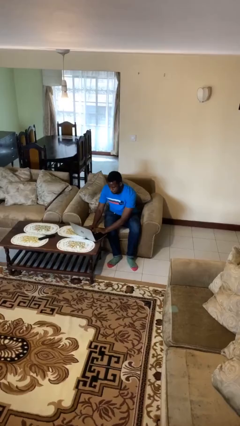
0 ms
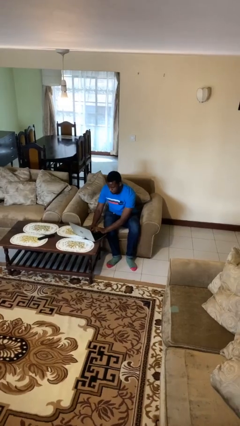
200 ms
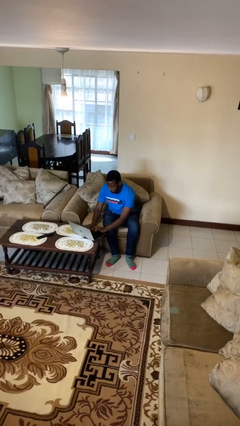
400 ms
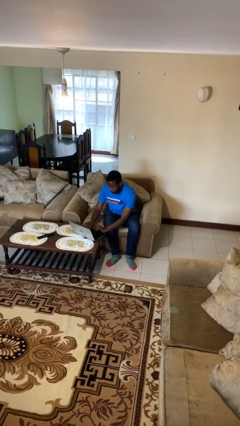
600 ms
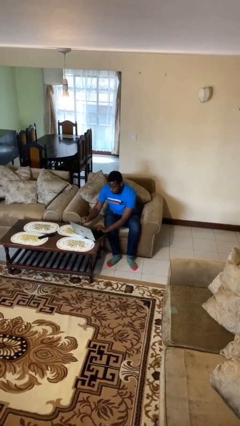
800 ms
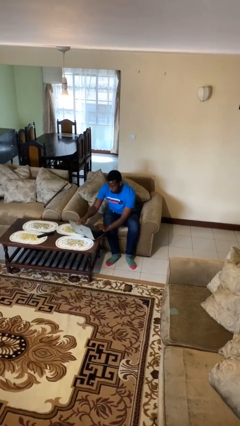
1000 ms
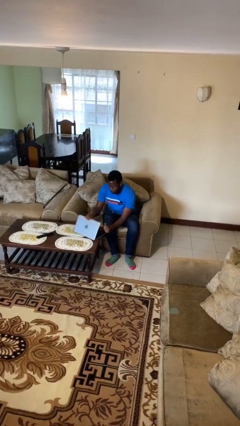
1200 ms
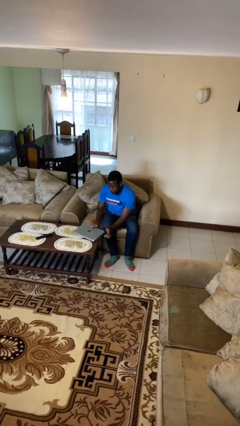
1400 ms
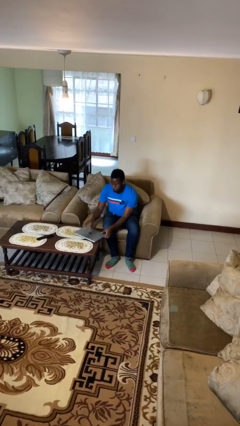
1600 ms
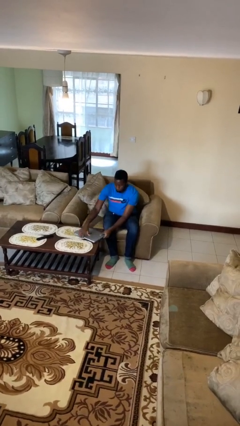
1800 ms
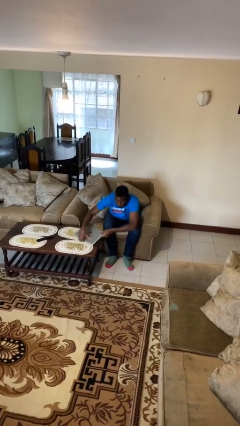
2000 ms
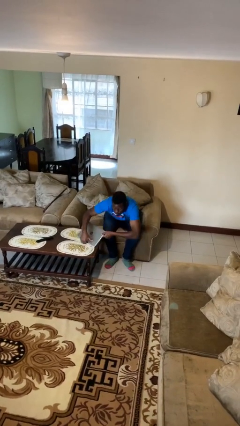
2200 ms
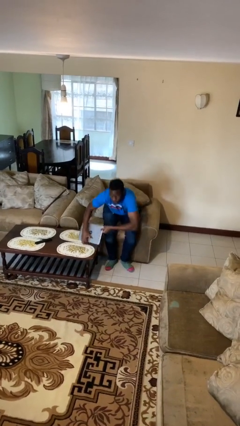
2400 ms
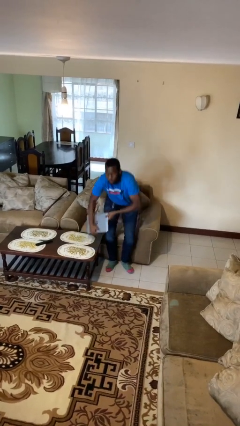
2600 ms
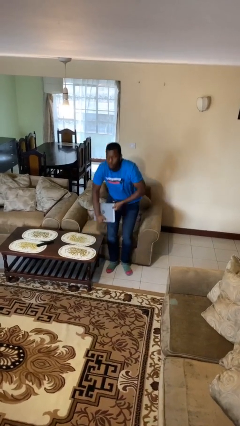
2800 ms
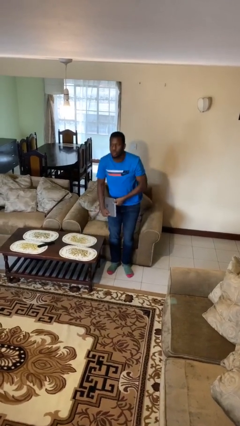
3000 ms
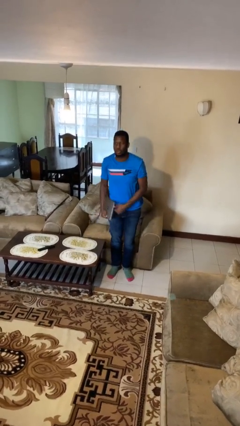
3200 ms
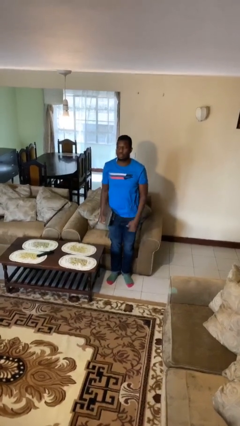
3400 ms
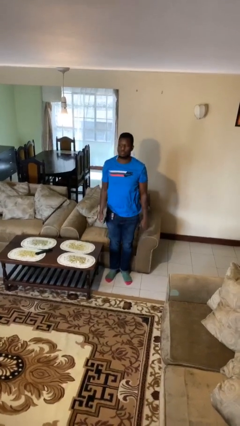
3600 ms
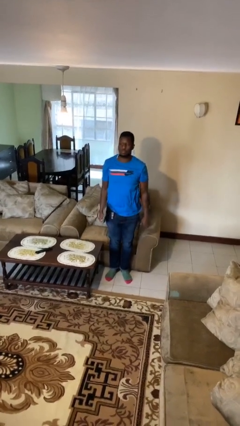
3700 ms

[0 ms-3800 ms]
person stands up

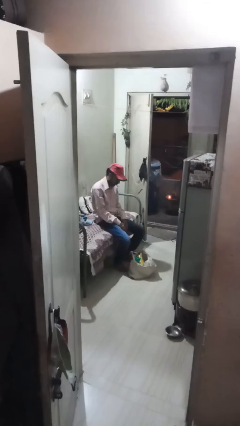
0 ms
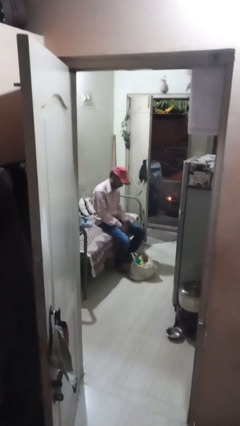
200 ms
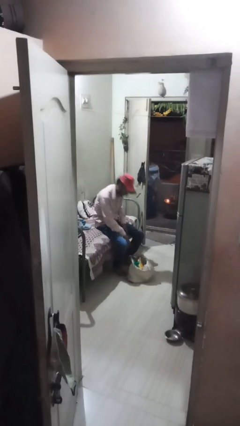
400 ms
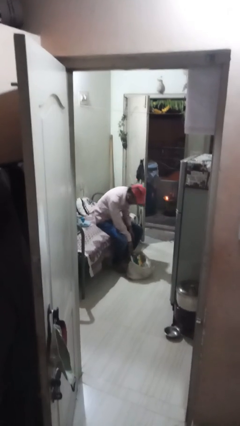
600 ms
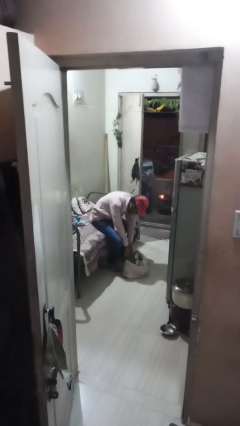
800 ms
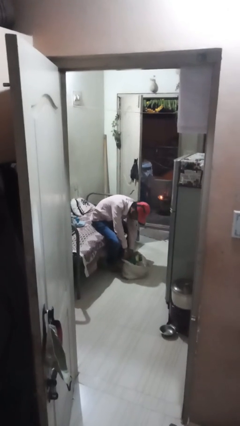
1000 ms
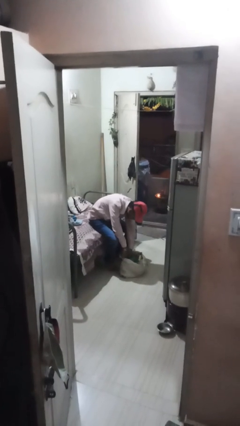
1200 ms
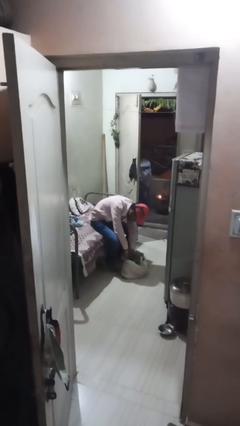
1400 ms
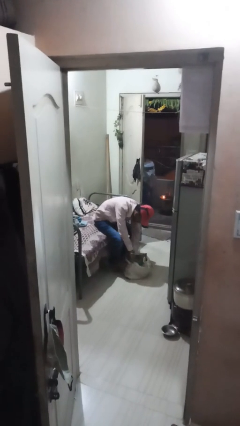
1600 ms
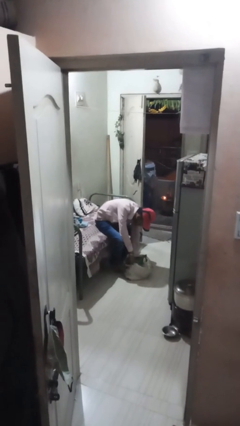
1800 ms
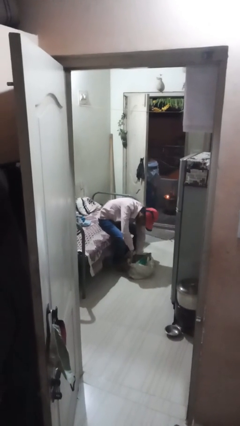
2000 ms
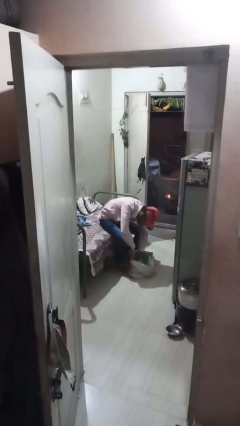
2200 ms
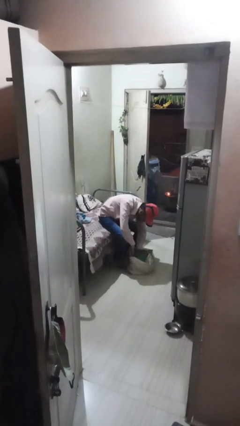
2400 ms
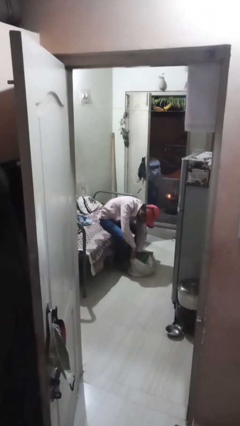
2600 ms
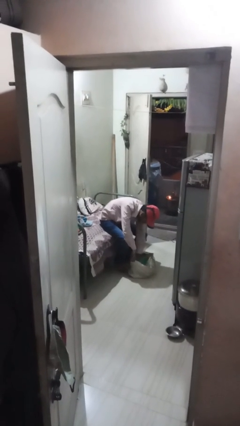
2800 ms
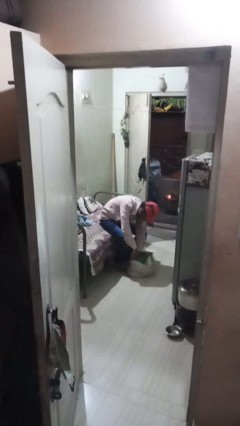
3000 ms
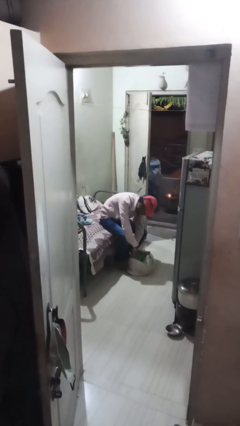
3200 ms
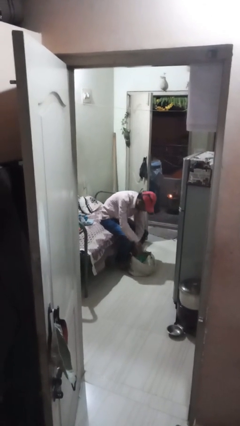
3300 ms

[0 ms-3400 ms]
person searches in bag

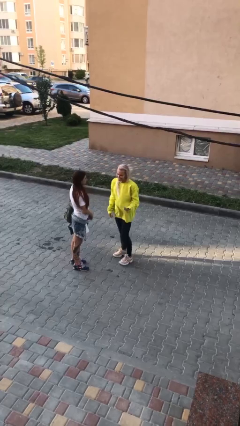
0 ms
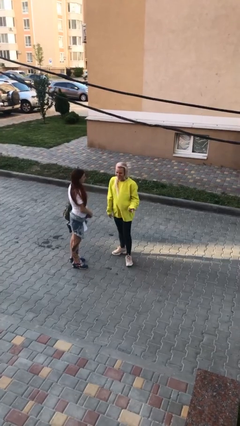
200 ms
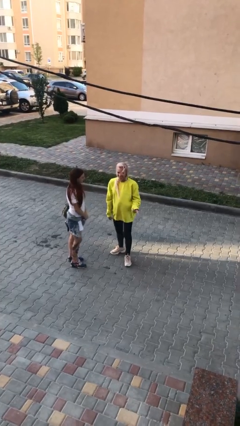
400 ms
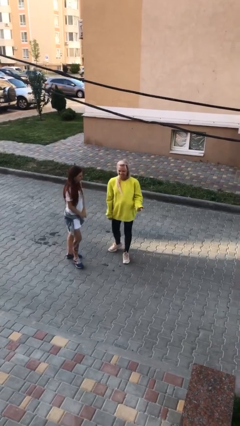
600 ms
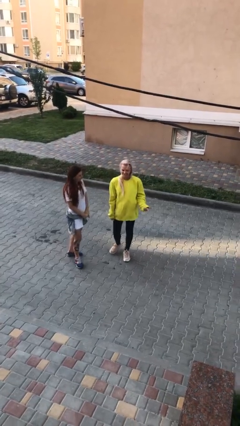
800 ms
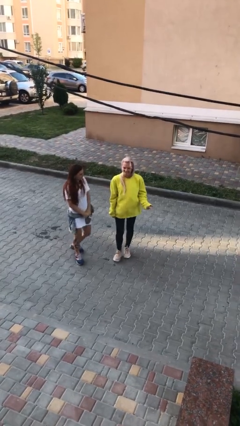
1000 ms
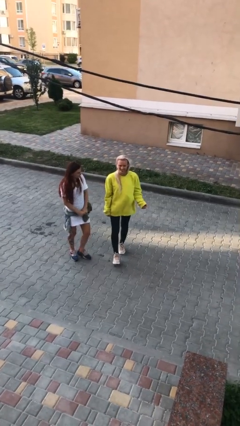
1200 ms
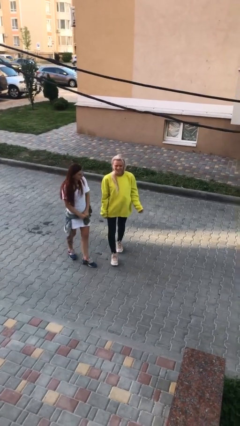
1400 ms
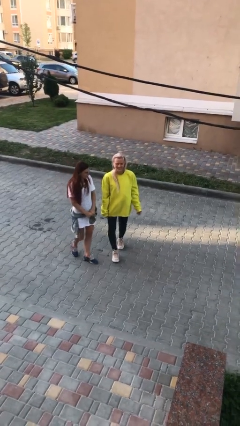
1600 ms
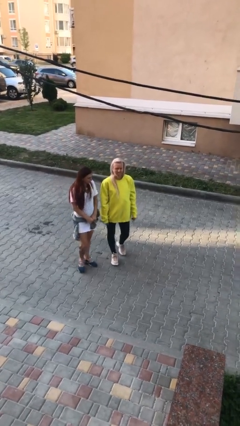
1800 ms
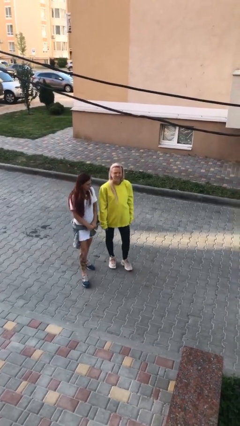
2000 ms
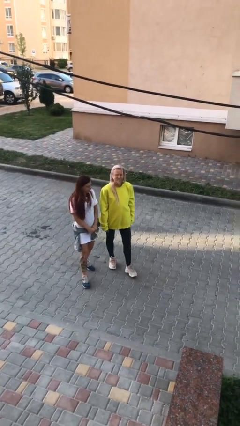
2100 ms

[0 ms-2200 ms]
person talks to person

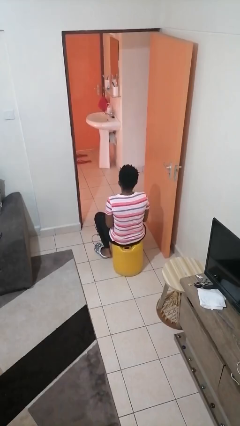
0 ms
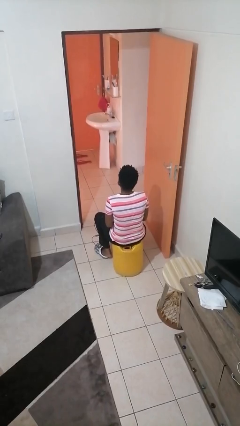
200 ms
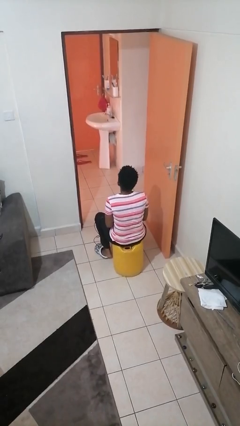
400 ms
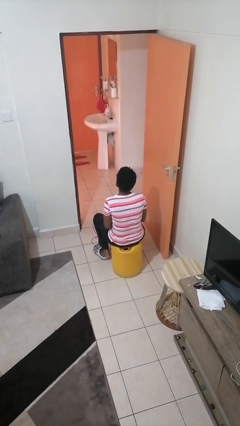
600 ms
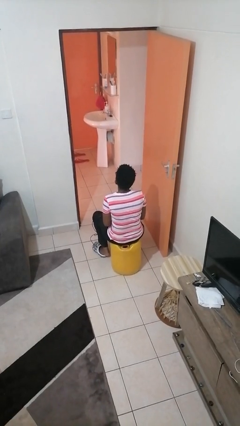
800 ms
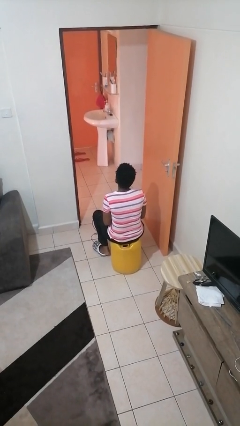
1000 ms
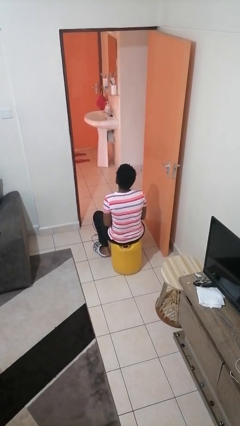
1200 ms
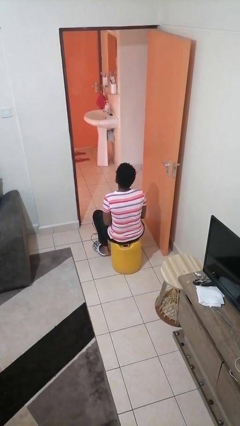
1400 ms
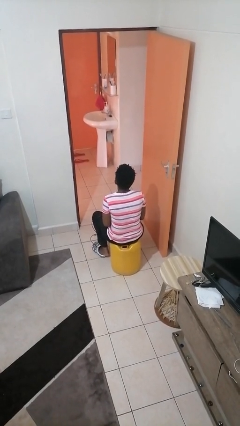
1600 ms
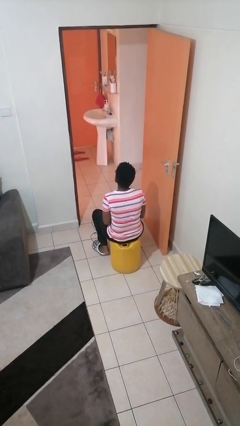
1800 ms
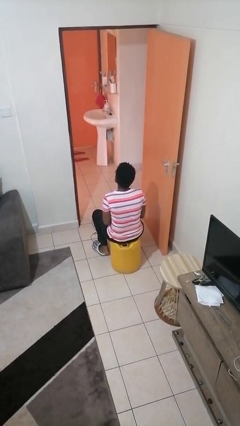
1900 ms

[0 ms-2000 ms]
person takes off headphones

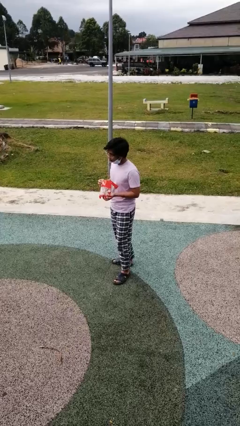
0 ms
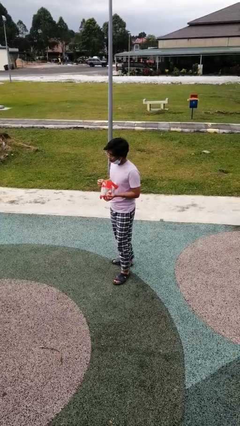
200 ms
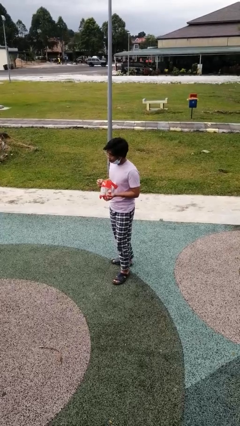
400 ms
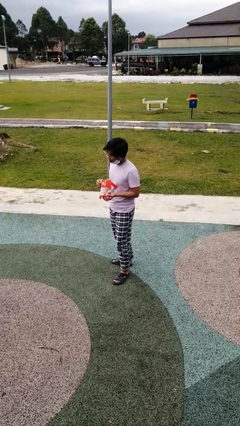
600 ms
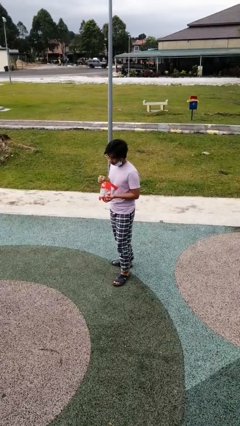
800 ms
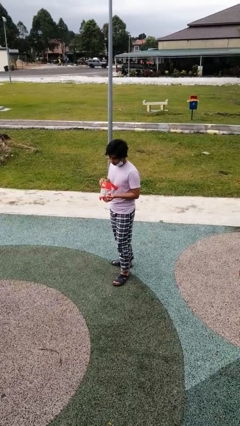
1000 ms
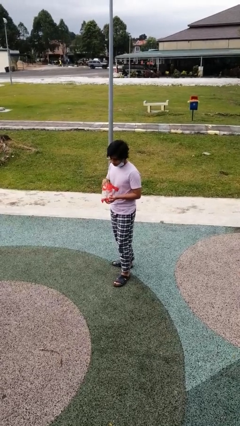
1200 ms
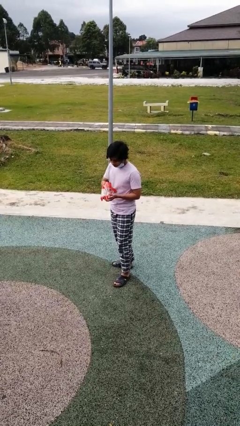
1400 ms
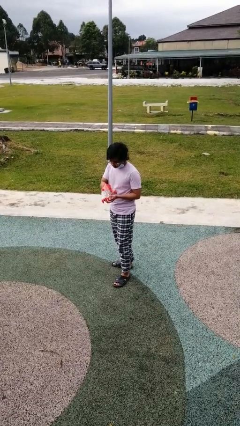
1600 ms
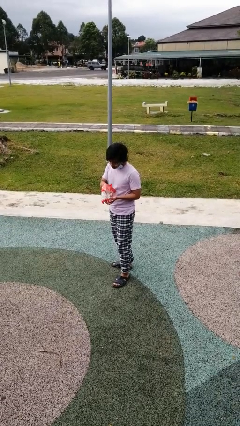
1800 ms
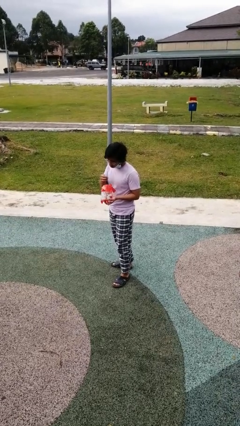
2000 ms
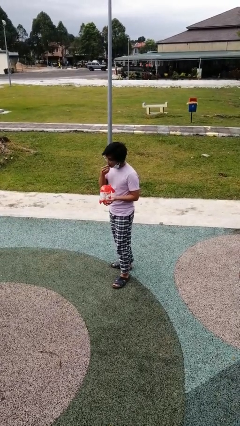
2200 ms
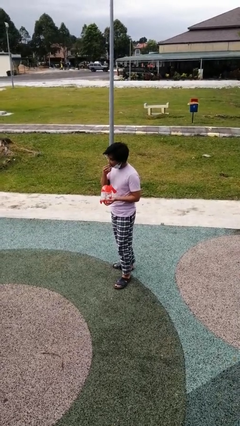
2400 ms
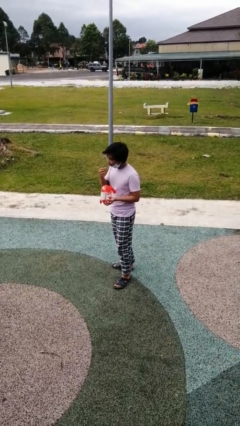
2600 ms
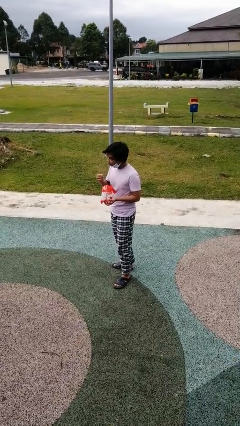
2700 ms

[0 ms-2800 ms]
person eats snack from bag

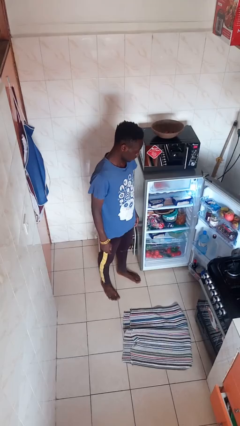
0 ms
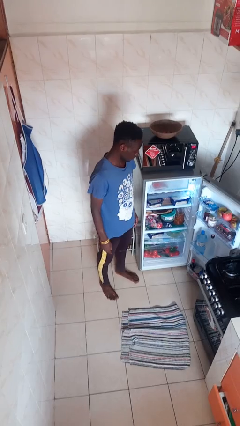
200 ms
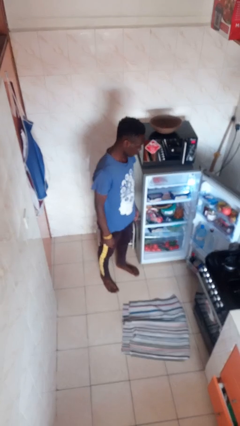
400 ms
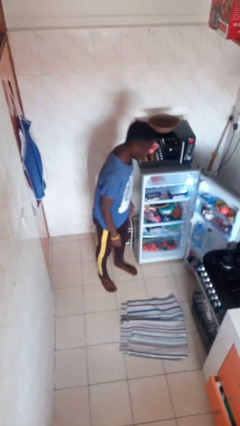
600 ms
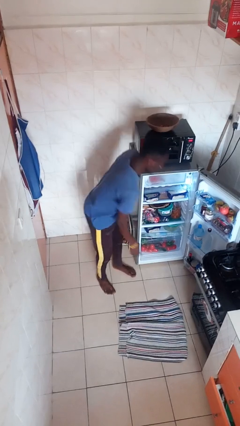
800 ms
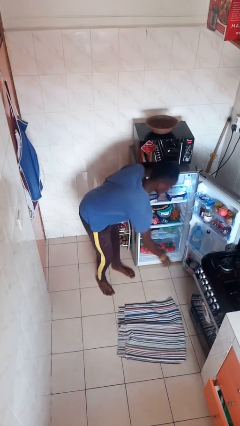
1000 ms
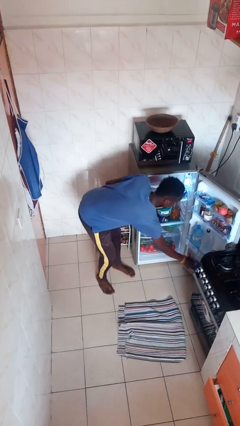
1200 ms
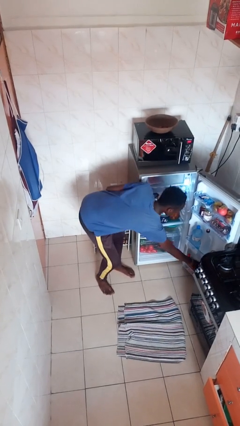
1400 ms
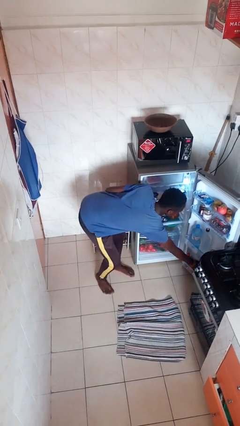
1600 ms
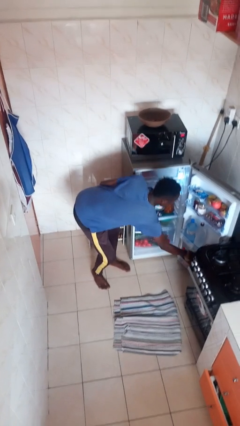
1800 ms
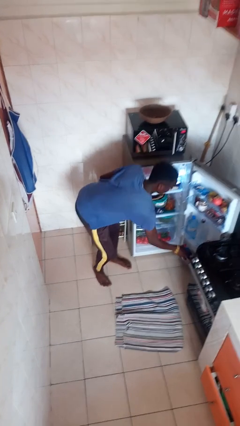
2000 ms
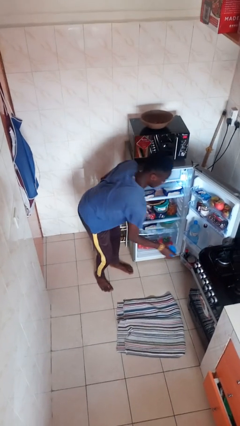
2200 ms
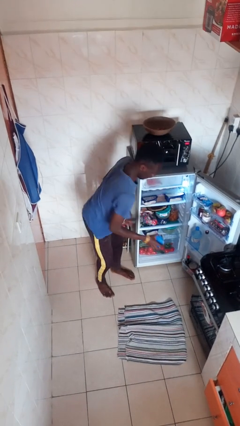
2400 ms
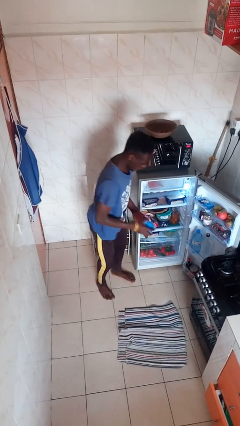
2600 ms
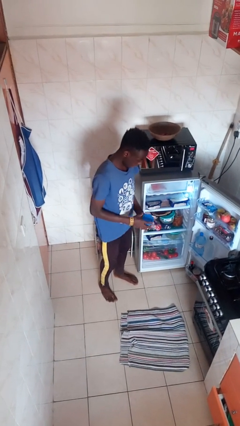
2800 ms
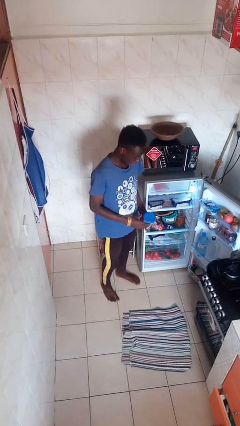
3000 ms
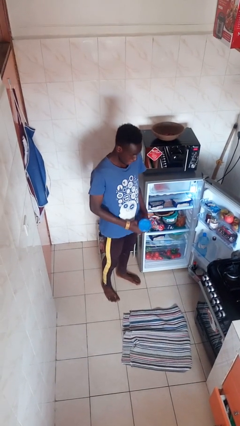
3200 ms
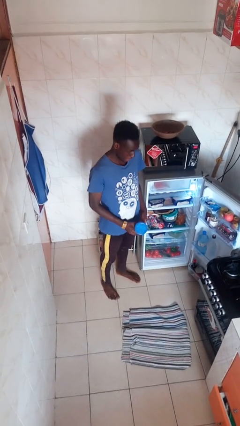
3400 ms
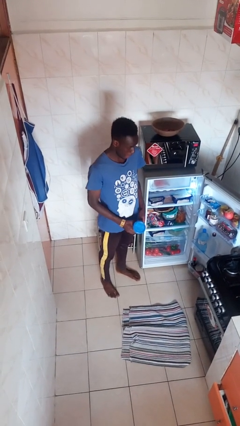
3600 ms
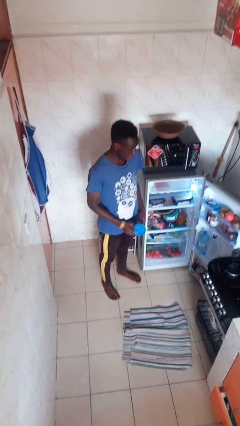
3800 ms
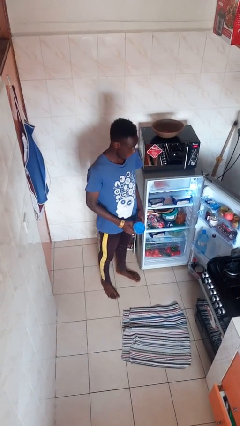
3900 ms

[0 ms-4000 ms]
person takes object from refrigerator
